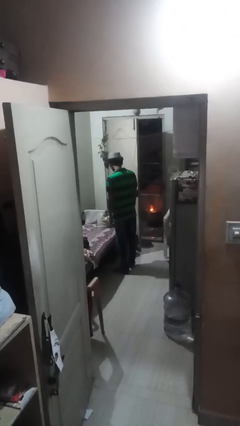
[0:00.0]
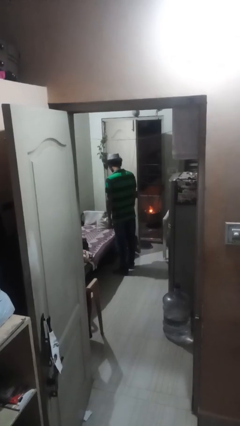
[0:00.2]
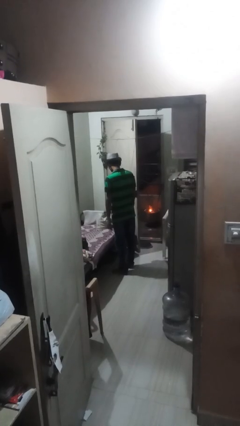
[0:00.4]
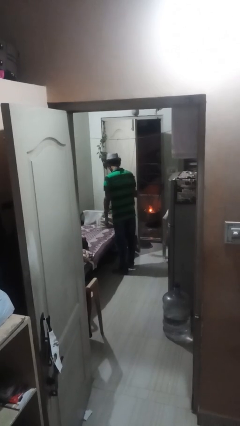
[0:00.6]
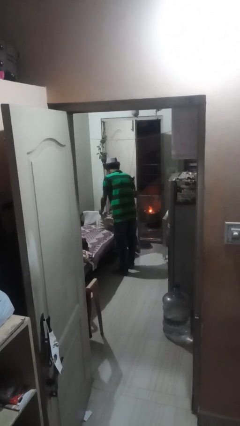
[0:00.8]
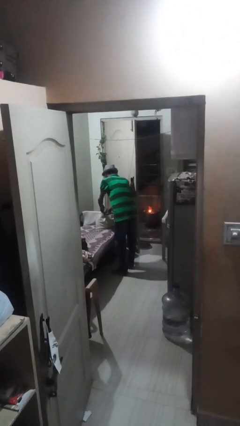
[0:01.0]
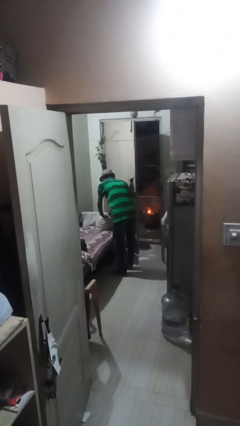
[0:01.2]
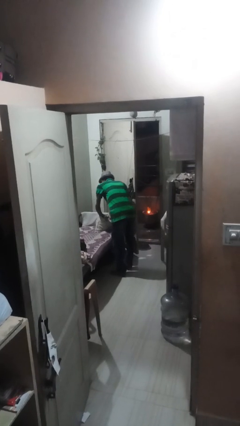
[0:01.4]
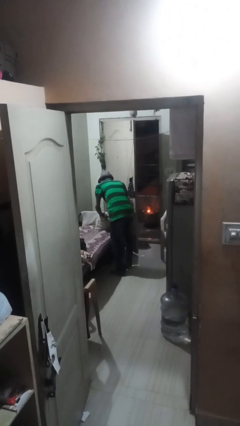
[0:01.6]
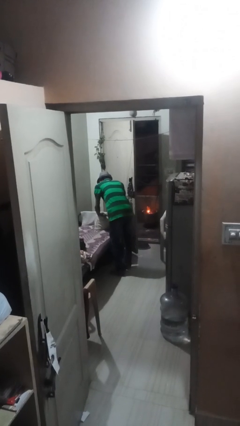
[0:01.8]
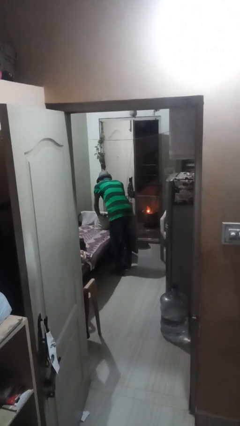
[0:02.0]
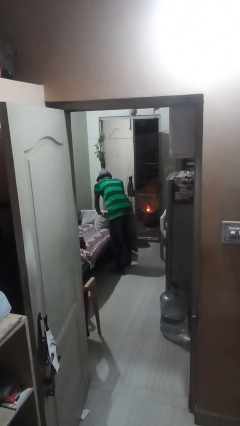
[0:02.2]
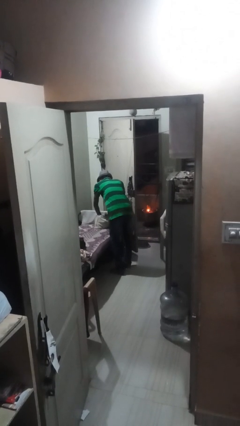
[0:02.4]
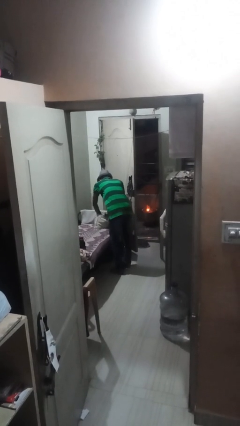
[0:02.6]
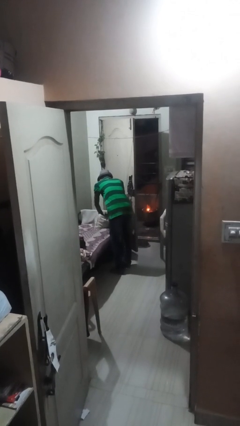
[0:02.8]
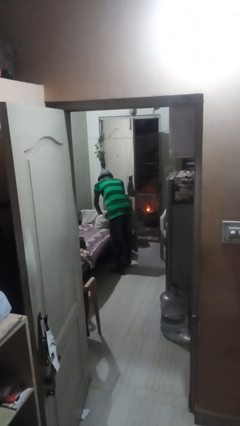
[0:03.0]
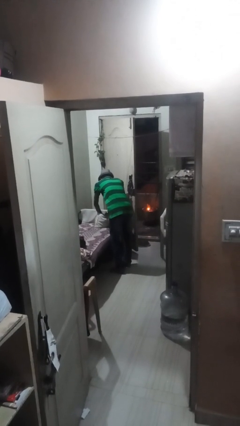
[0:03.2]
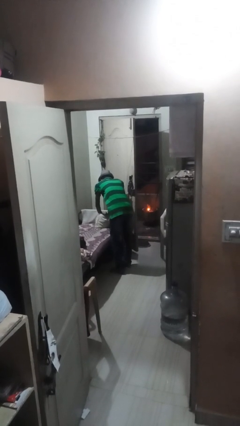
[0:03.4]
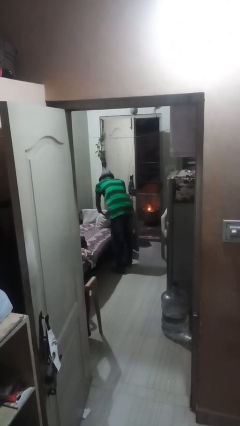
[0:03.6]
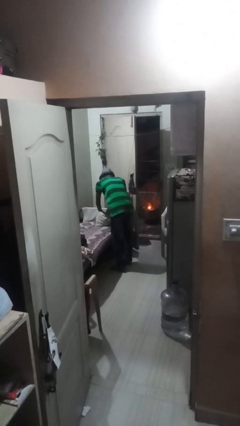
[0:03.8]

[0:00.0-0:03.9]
person searches in bag

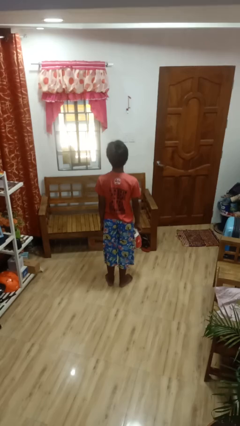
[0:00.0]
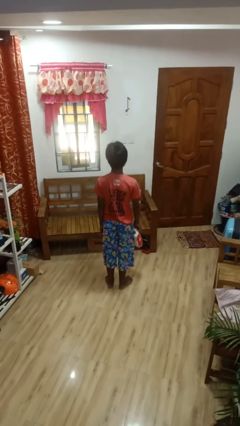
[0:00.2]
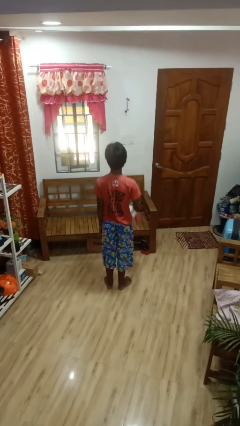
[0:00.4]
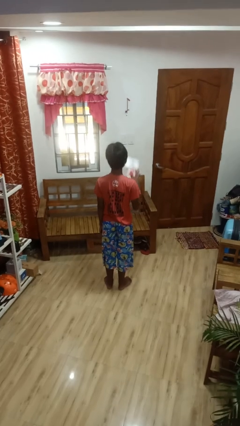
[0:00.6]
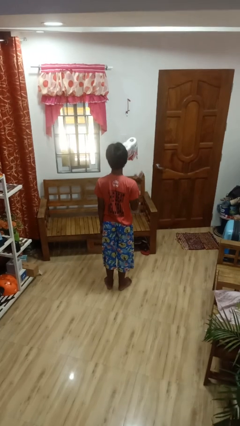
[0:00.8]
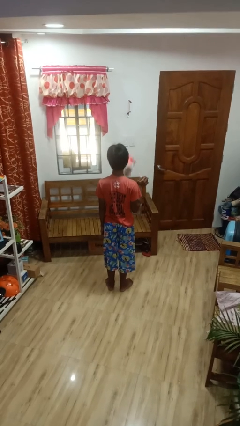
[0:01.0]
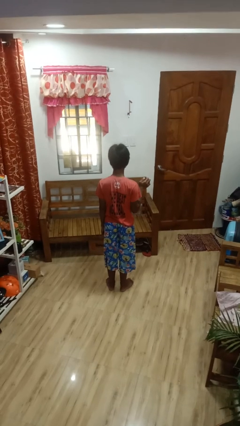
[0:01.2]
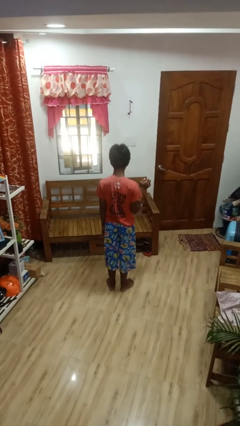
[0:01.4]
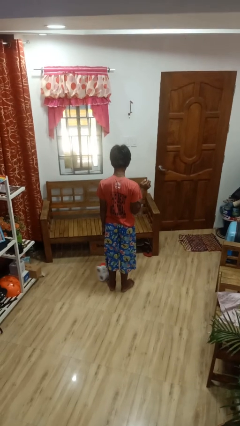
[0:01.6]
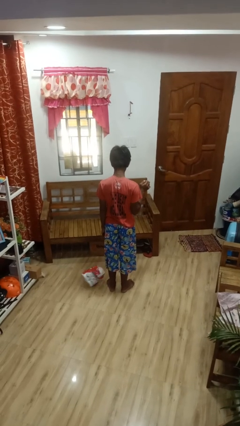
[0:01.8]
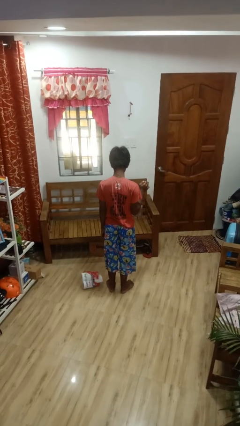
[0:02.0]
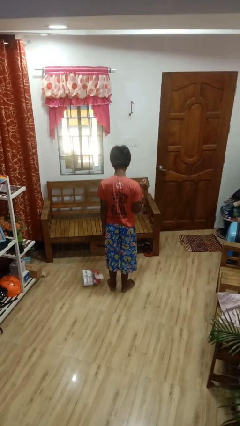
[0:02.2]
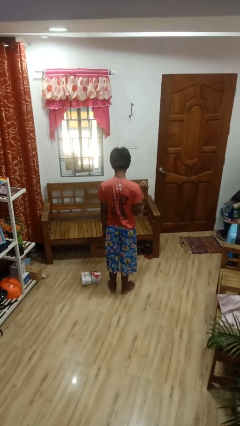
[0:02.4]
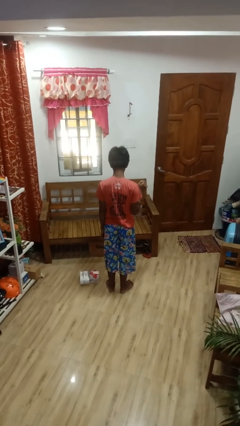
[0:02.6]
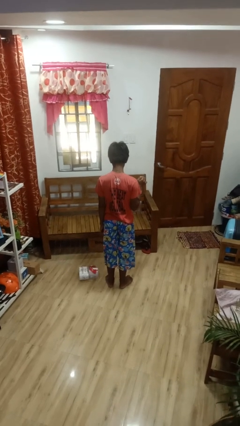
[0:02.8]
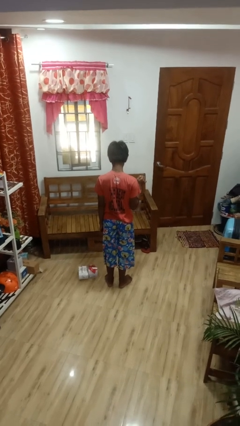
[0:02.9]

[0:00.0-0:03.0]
person throws object into air

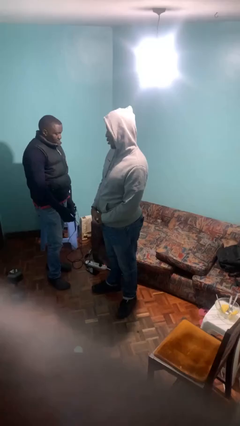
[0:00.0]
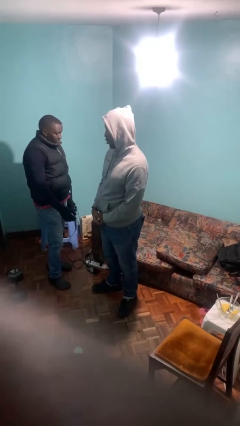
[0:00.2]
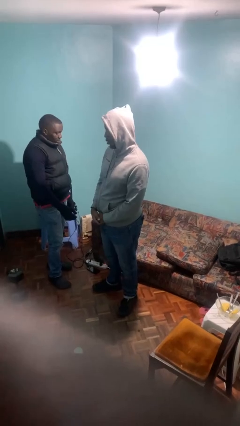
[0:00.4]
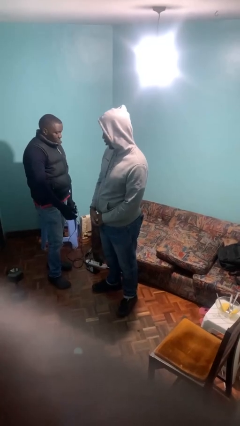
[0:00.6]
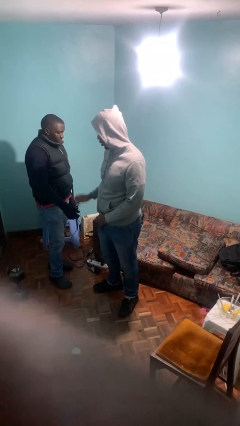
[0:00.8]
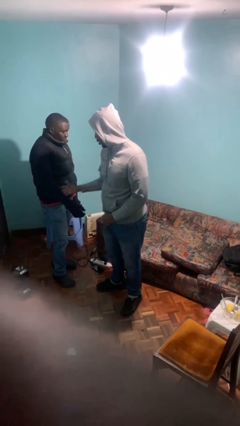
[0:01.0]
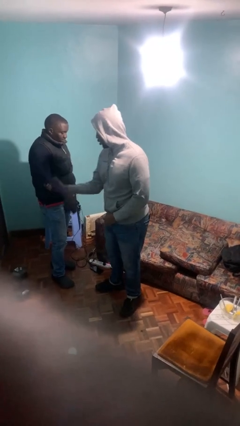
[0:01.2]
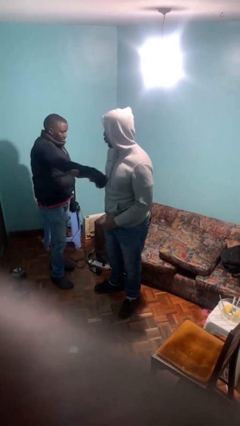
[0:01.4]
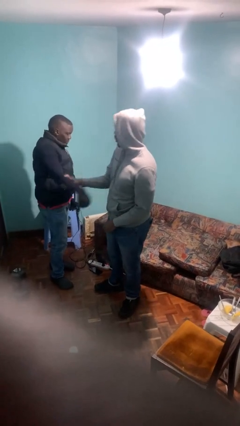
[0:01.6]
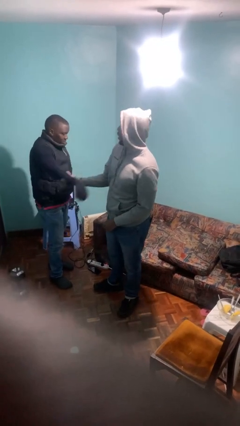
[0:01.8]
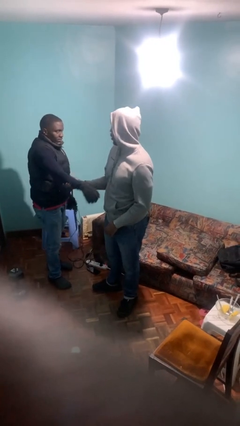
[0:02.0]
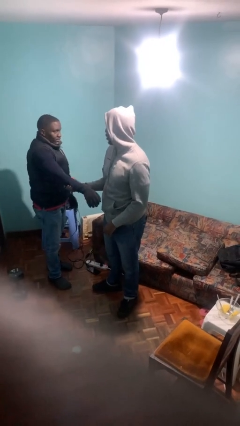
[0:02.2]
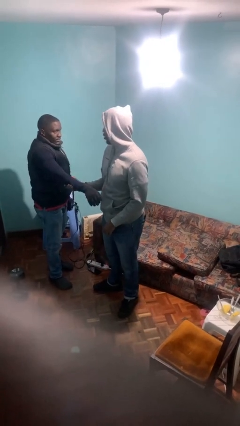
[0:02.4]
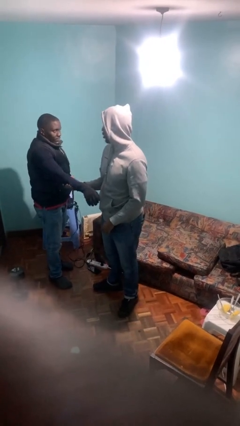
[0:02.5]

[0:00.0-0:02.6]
person grabs person by forearm

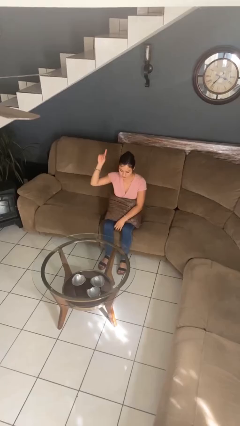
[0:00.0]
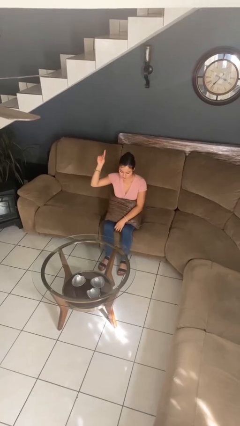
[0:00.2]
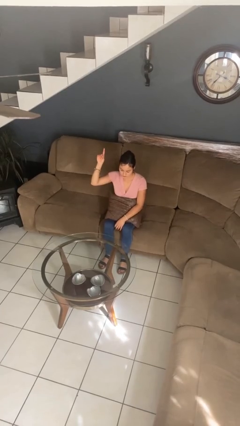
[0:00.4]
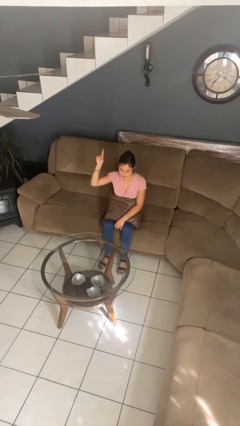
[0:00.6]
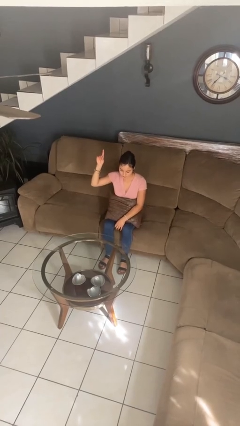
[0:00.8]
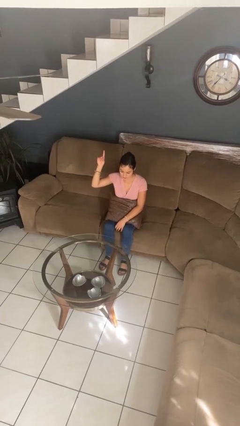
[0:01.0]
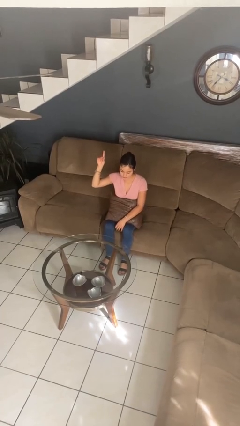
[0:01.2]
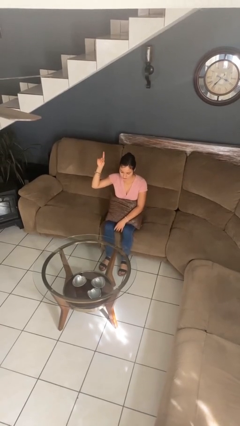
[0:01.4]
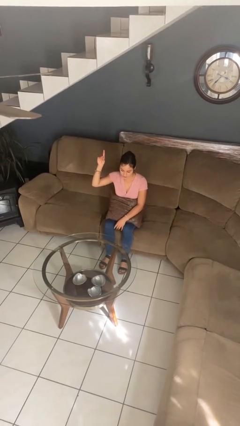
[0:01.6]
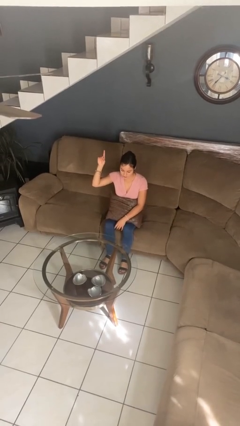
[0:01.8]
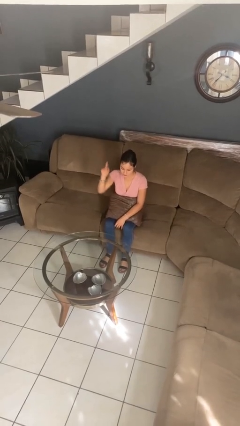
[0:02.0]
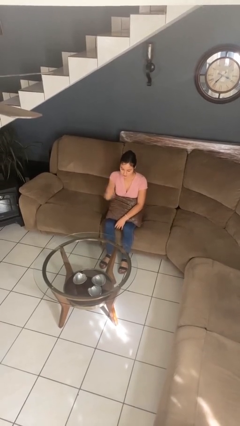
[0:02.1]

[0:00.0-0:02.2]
person gestures number one

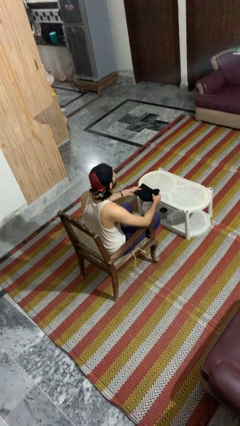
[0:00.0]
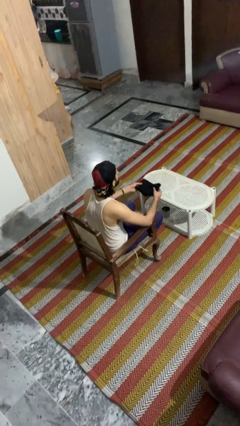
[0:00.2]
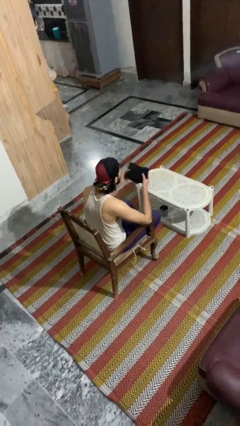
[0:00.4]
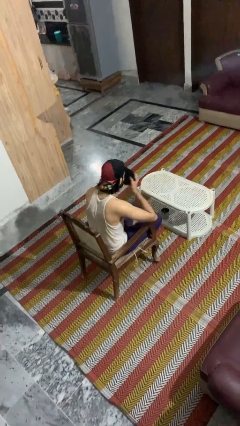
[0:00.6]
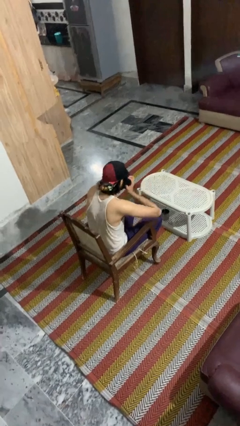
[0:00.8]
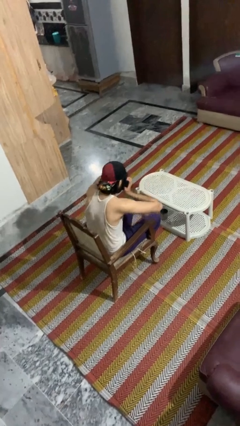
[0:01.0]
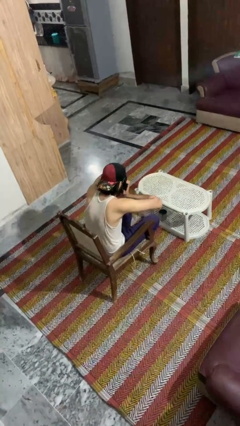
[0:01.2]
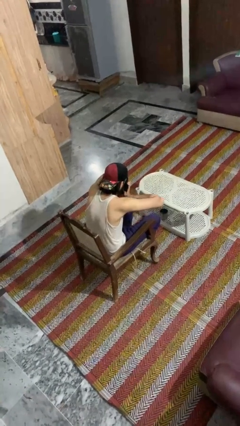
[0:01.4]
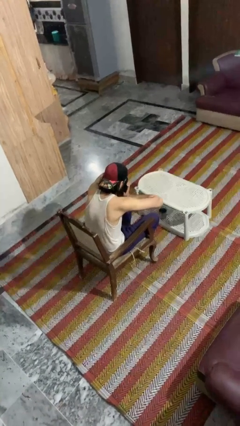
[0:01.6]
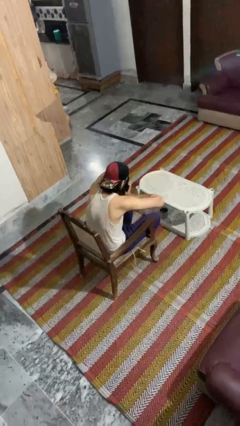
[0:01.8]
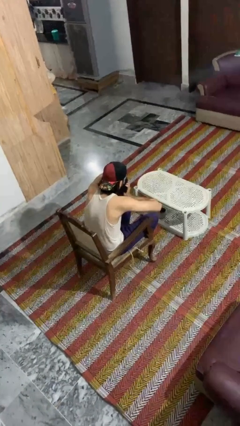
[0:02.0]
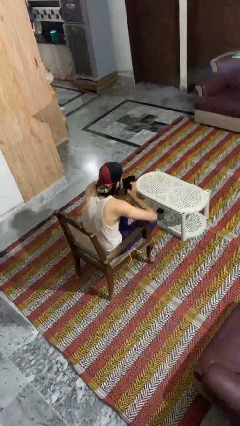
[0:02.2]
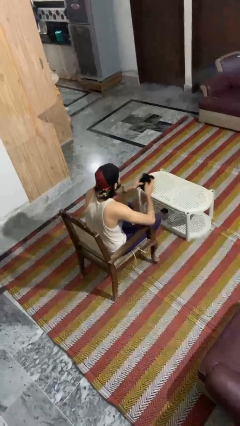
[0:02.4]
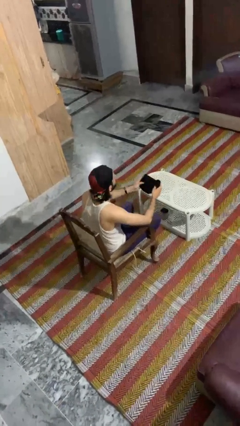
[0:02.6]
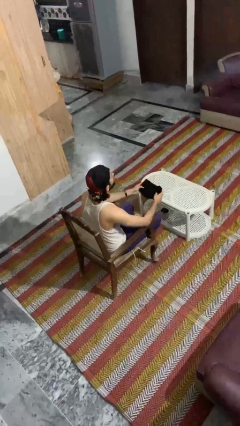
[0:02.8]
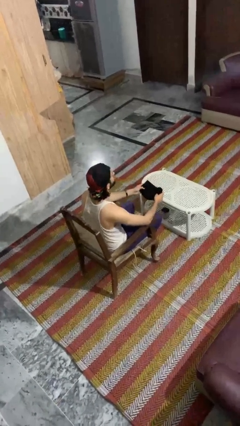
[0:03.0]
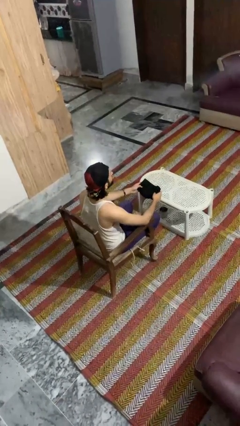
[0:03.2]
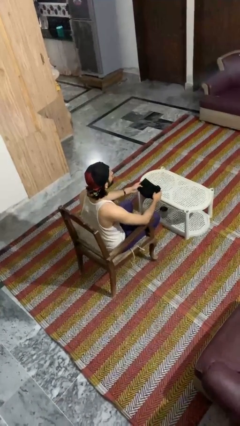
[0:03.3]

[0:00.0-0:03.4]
person blows nose

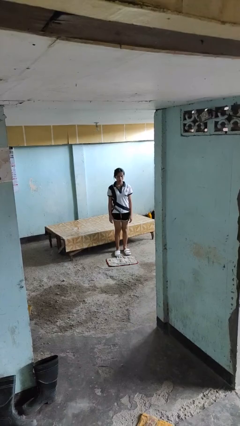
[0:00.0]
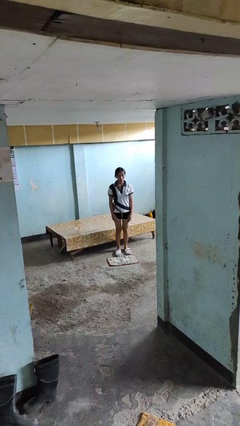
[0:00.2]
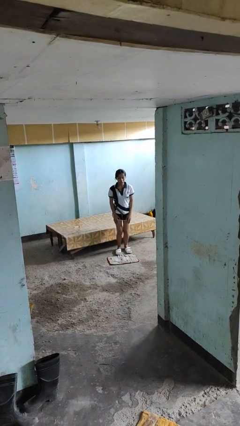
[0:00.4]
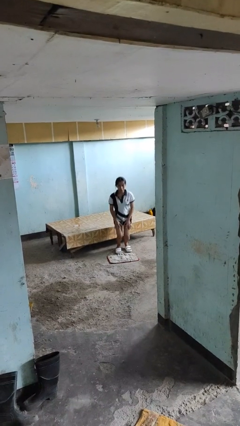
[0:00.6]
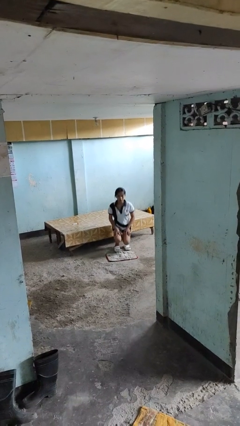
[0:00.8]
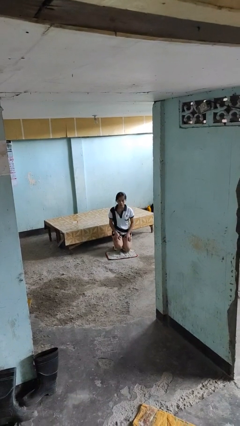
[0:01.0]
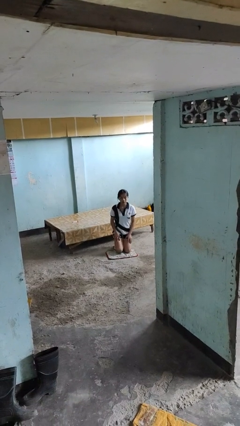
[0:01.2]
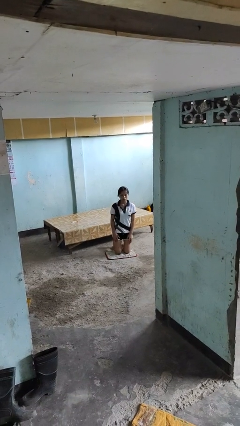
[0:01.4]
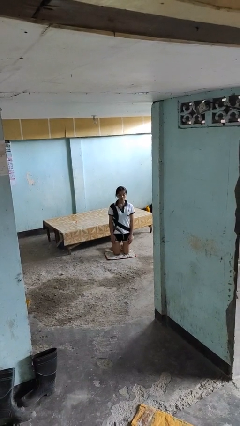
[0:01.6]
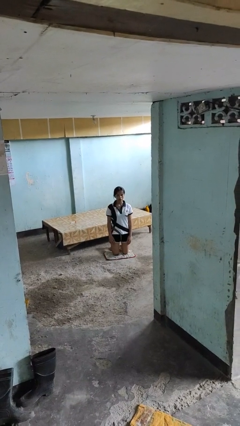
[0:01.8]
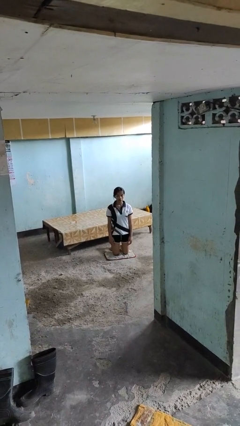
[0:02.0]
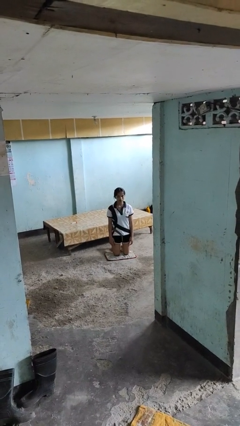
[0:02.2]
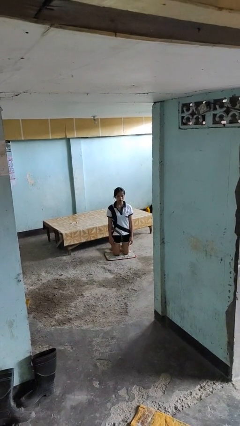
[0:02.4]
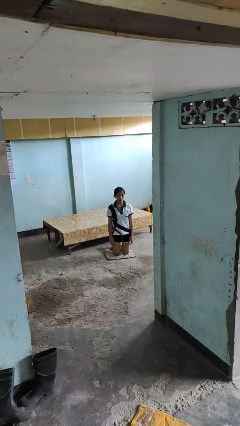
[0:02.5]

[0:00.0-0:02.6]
person kneels

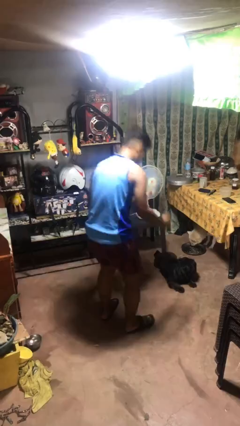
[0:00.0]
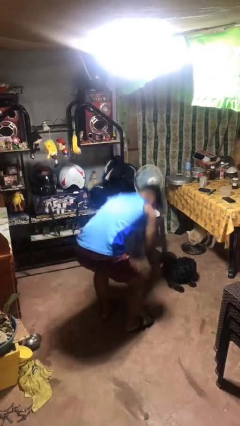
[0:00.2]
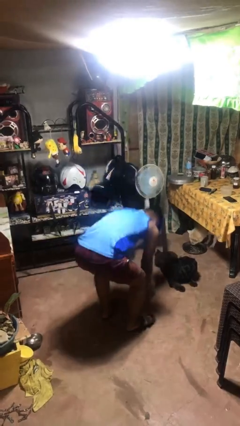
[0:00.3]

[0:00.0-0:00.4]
person drops object
